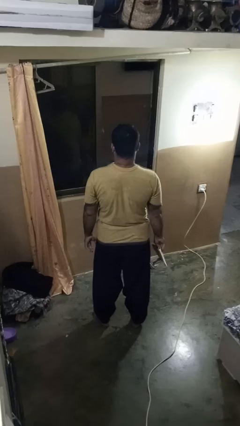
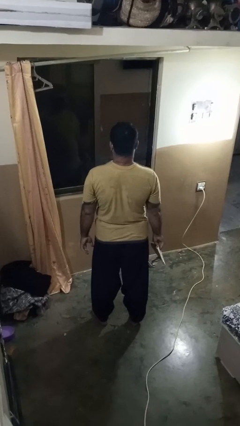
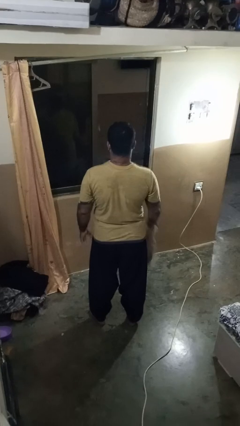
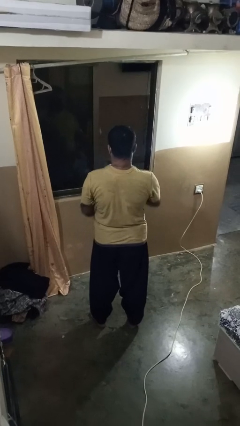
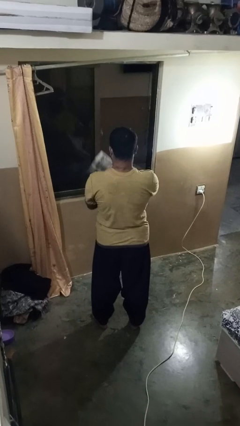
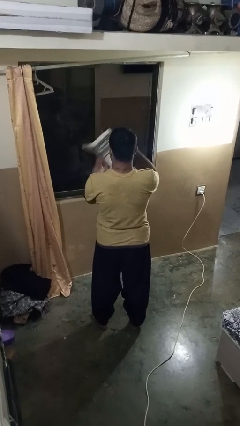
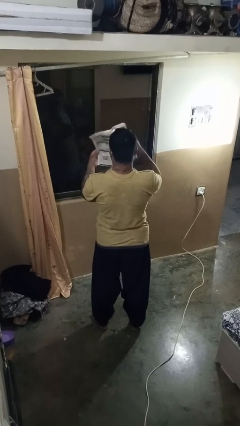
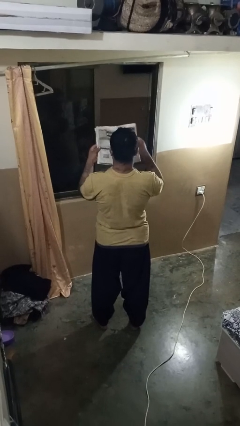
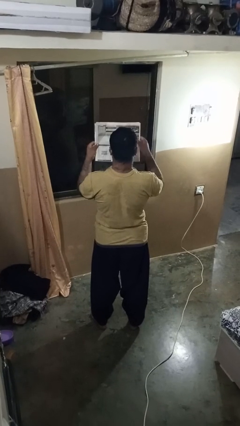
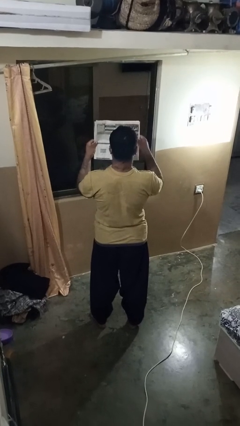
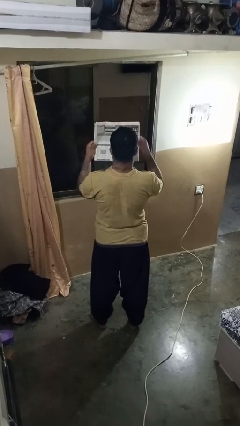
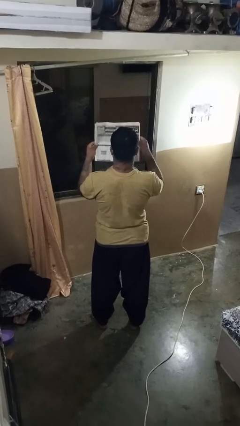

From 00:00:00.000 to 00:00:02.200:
person reads newspaper

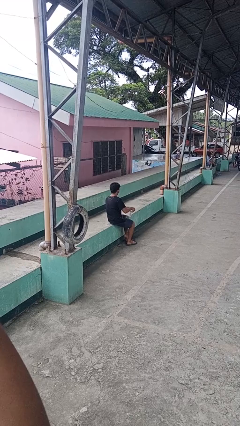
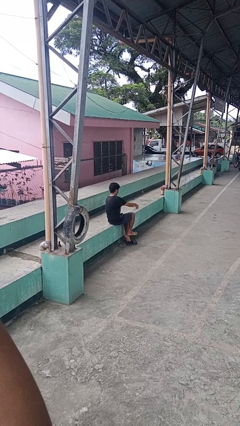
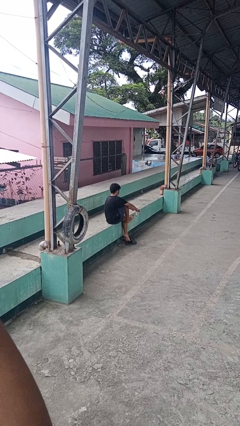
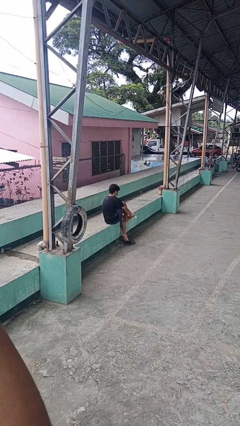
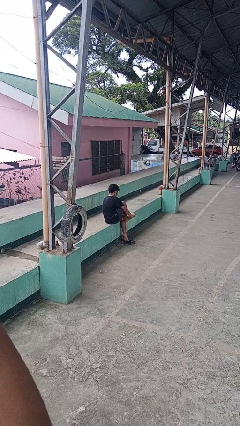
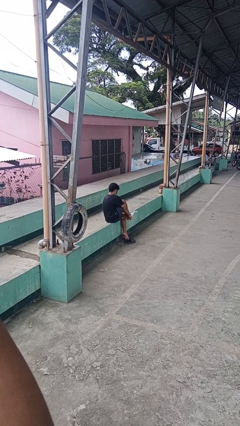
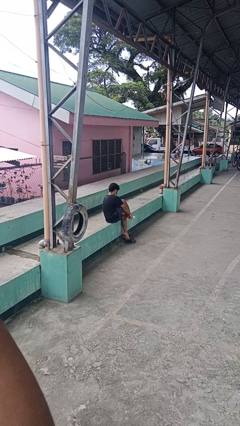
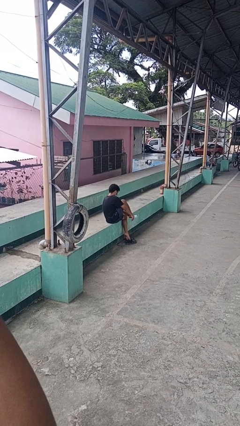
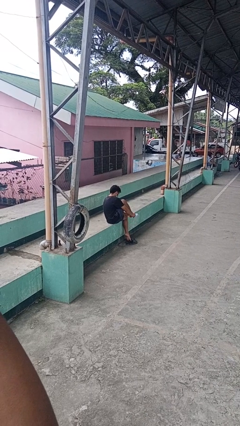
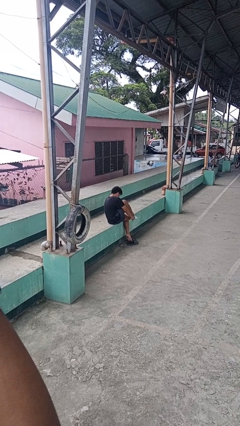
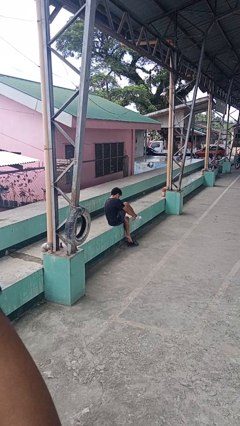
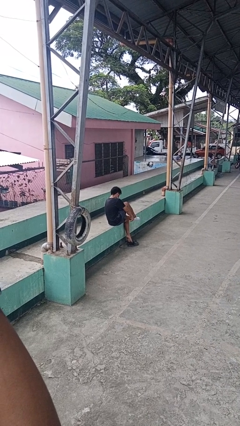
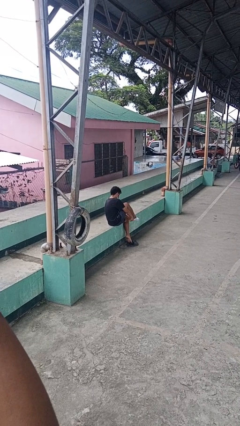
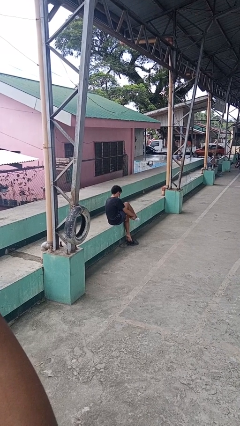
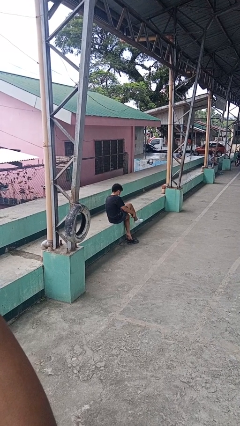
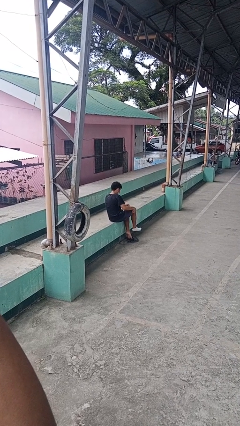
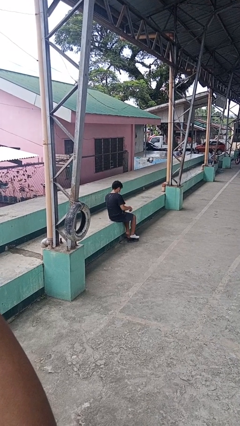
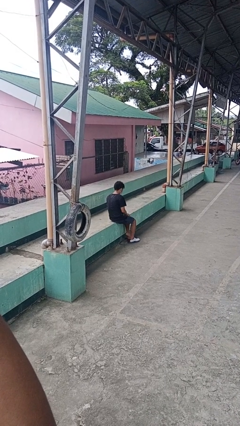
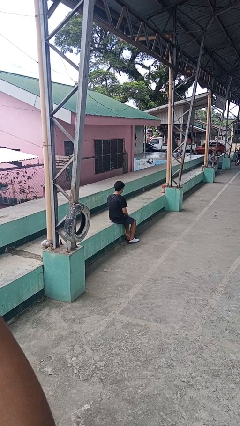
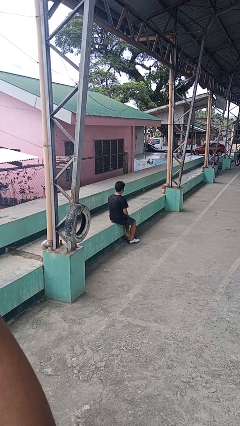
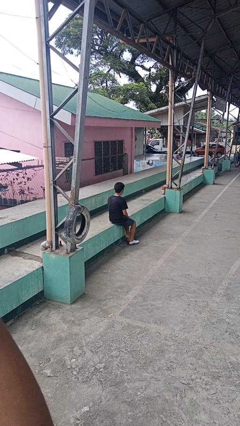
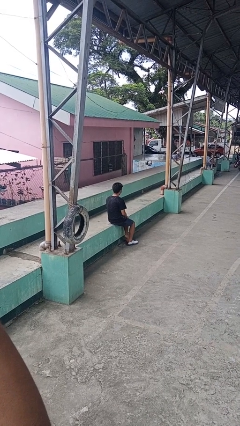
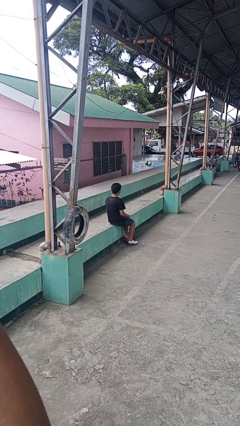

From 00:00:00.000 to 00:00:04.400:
person puts on socks

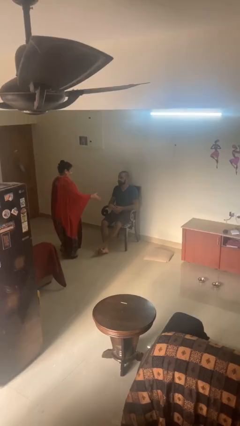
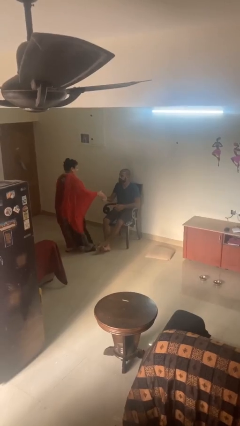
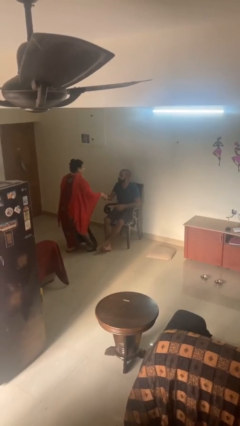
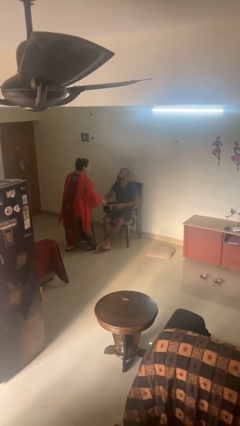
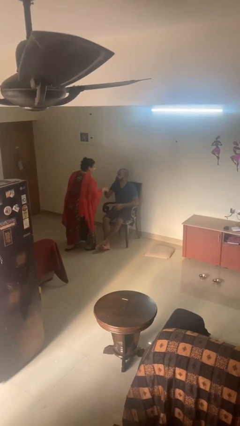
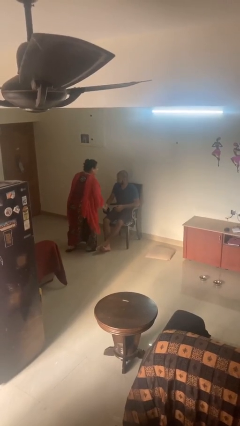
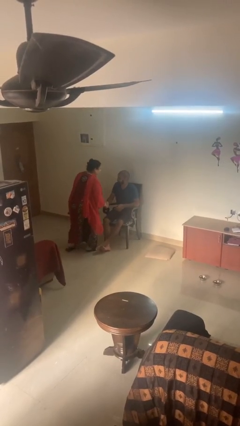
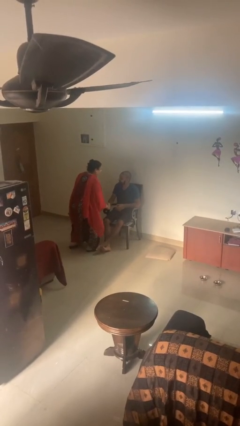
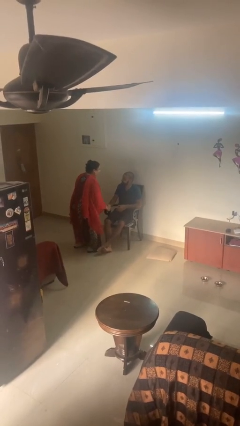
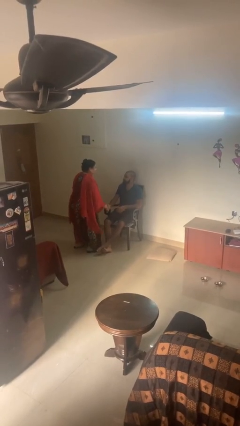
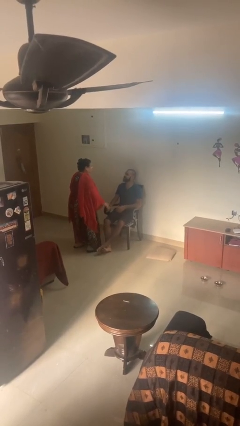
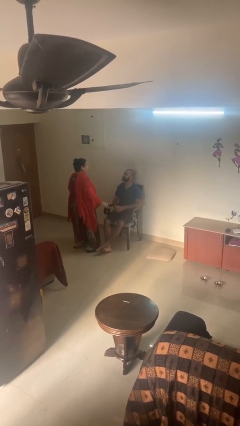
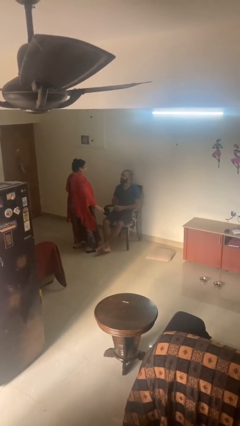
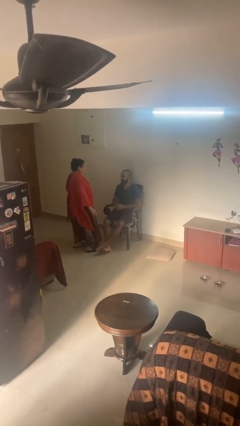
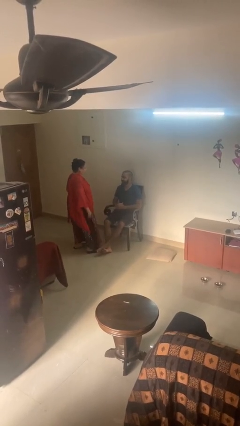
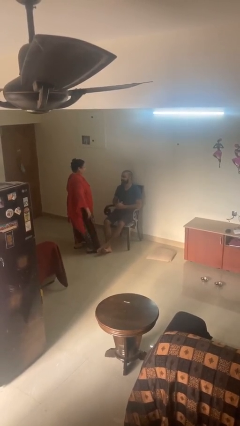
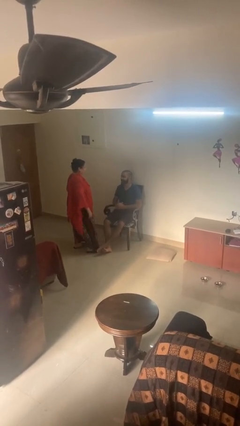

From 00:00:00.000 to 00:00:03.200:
person shakes hand

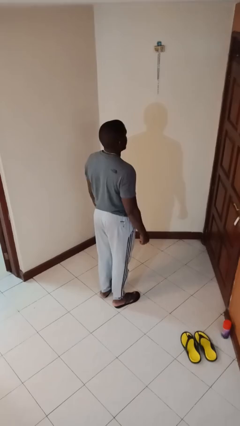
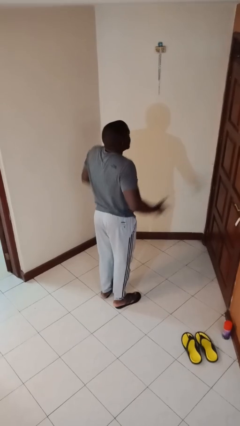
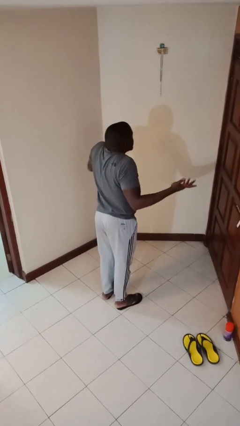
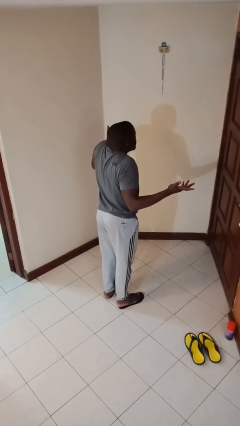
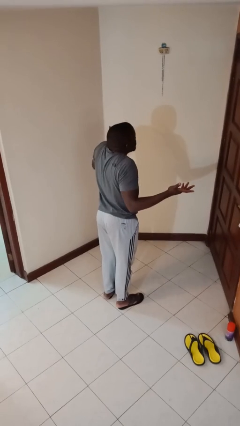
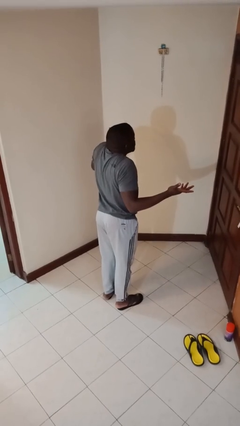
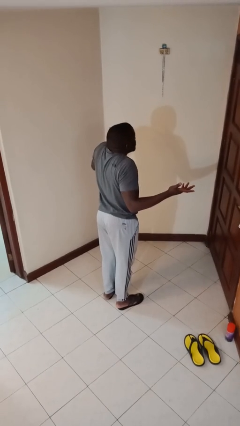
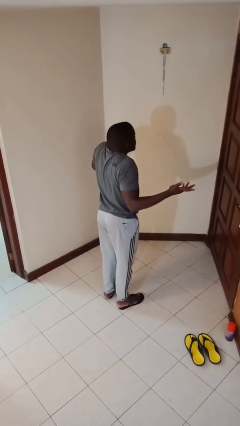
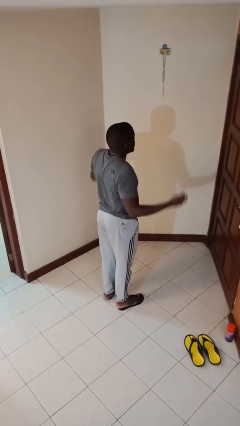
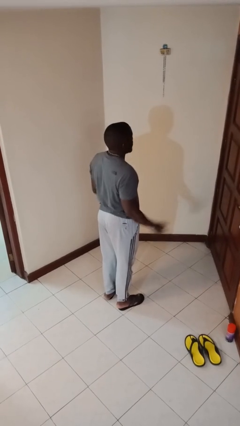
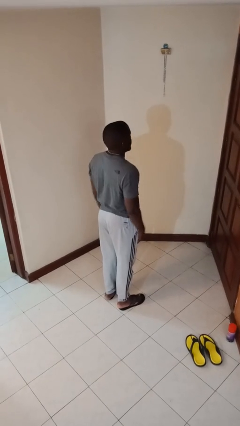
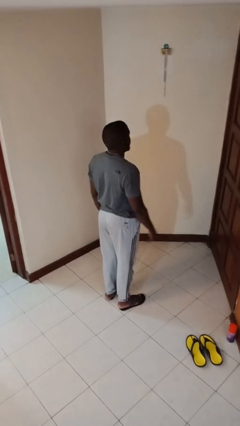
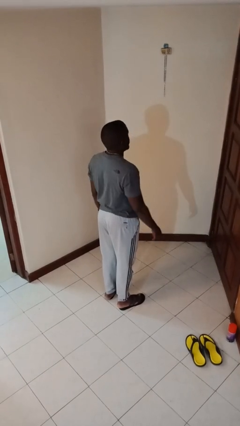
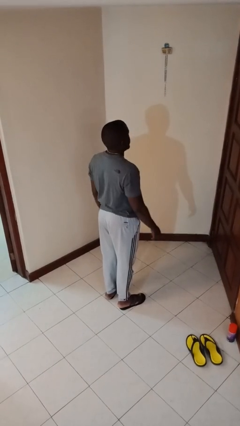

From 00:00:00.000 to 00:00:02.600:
person shrugs

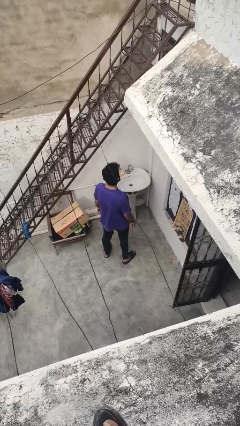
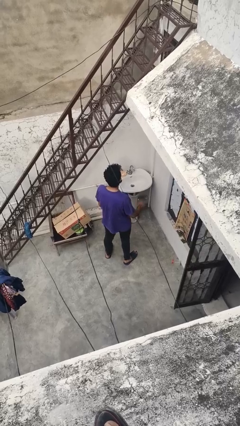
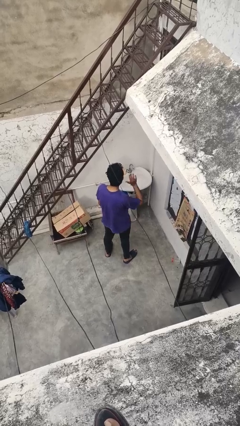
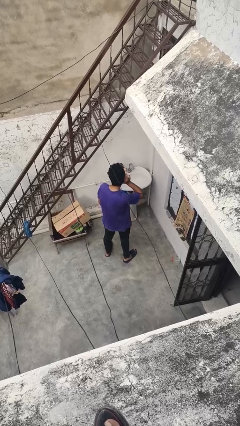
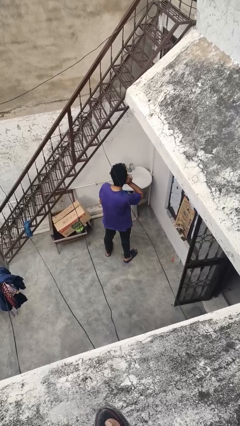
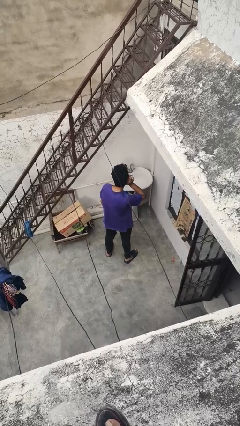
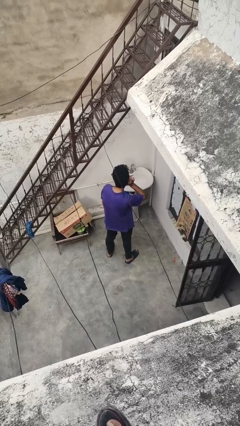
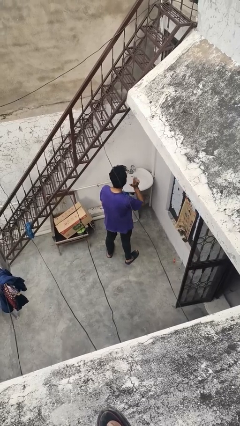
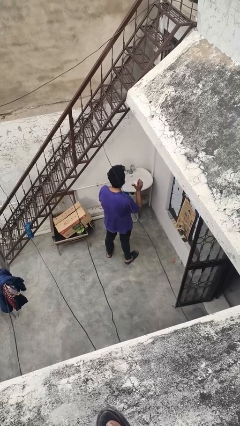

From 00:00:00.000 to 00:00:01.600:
person gestures listen closely

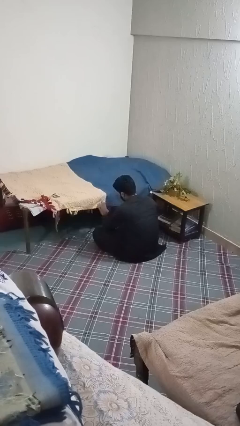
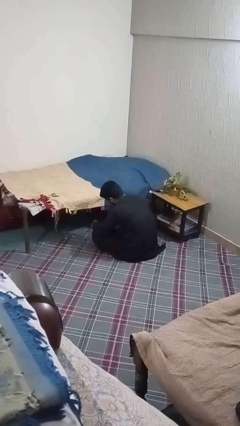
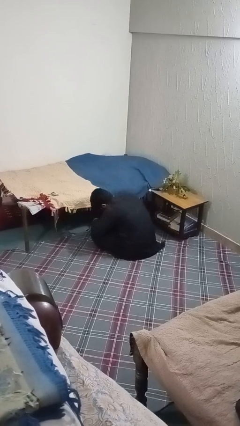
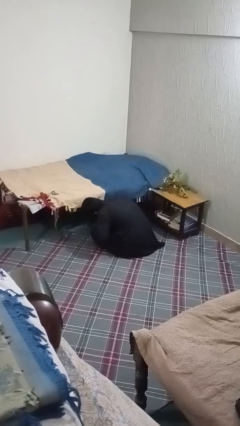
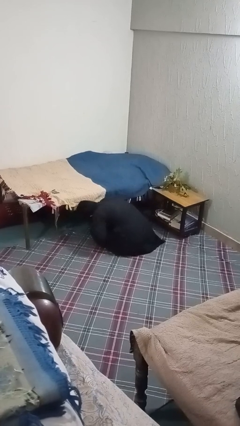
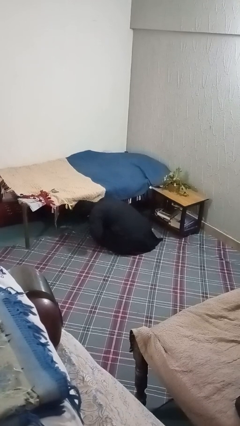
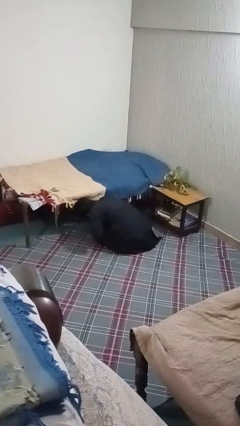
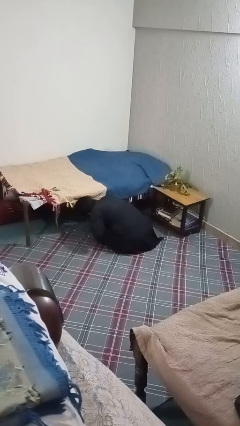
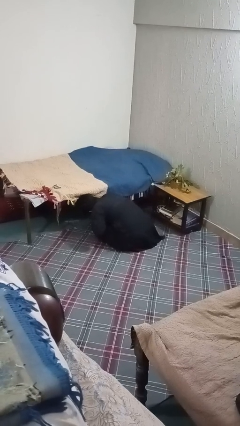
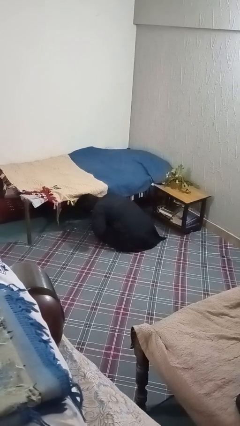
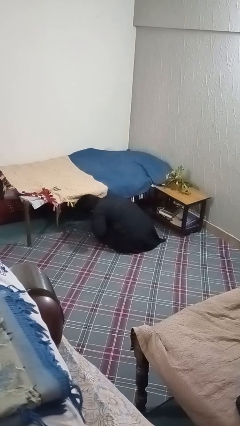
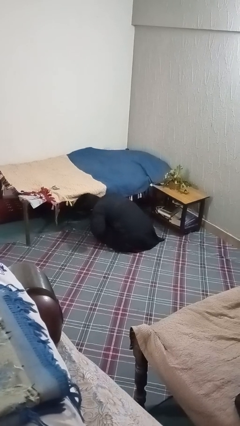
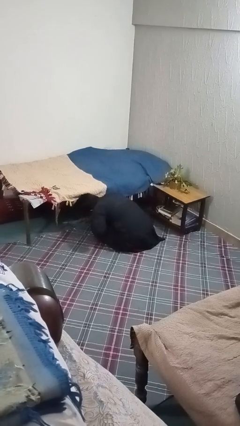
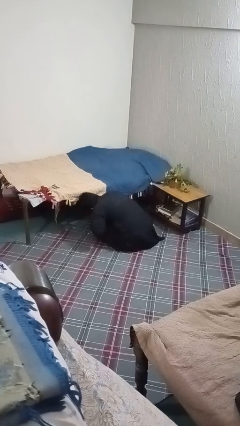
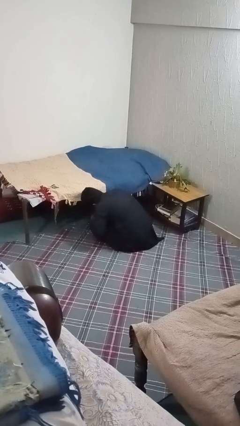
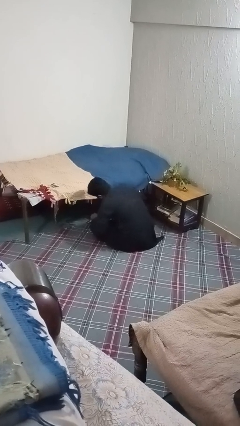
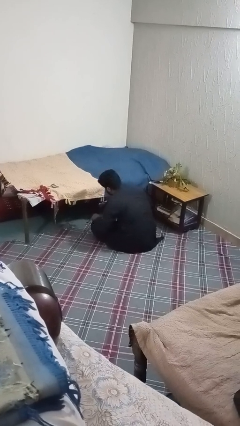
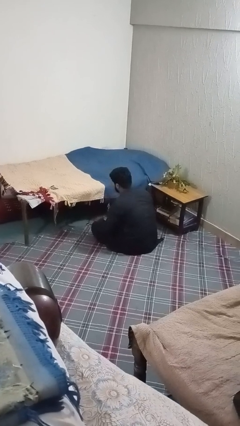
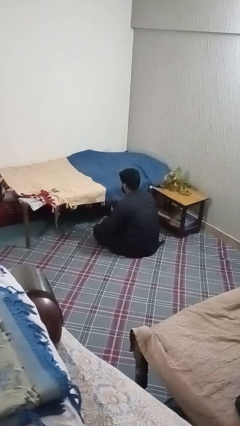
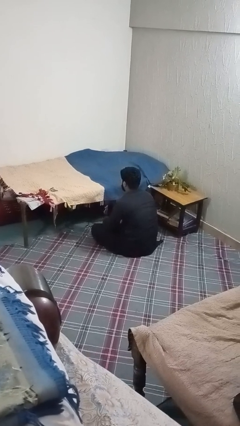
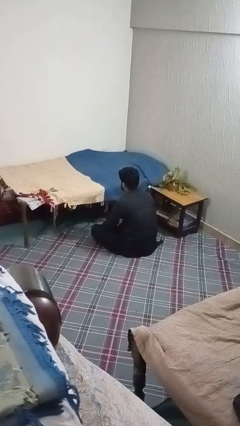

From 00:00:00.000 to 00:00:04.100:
person searches under bed
